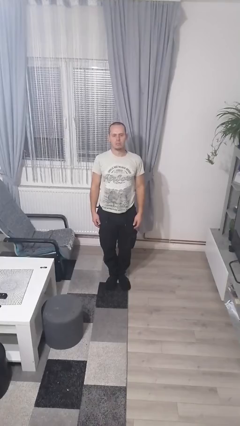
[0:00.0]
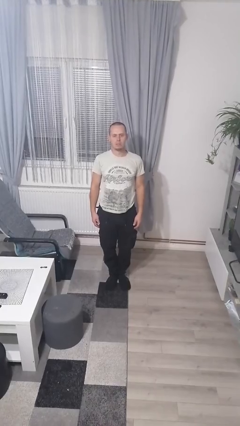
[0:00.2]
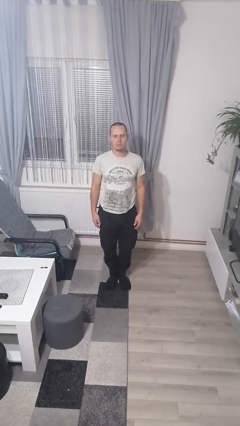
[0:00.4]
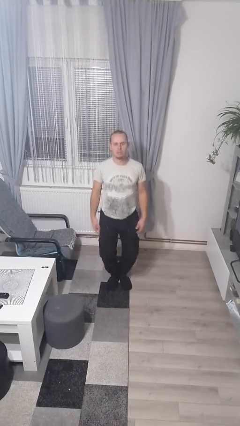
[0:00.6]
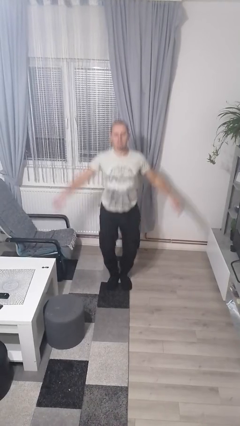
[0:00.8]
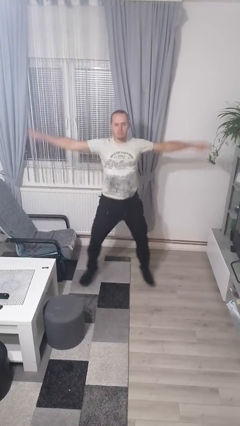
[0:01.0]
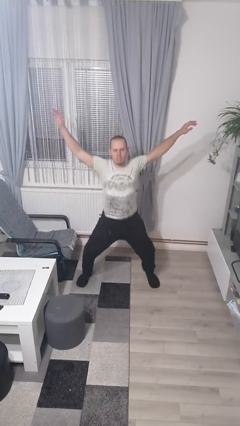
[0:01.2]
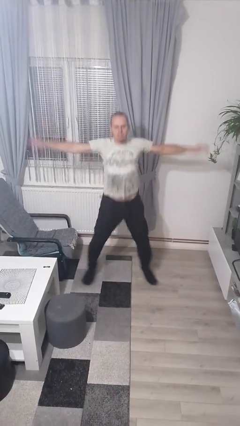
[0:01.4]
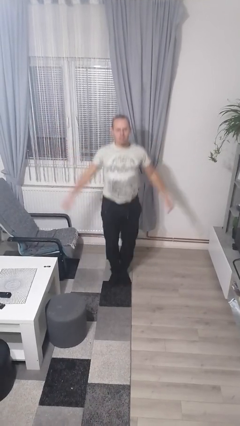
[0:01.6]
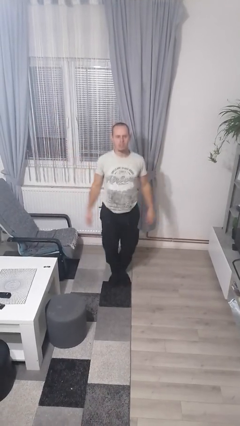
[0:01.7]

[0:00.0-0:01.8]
person exercises with jumping jacks

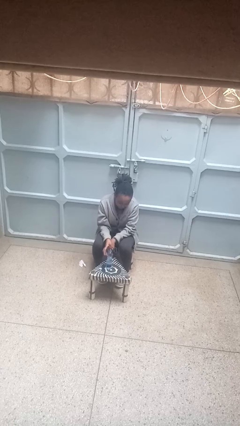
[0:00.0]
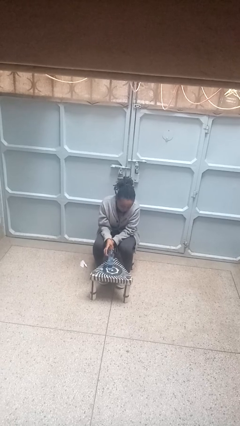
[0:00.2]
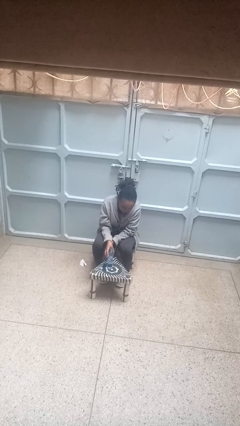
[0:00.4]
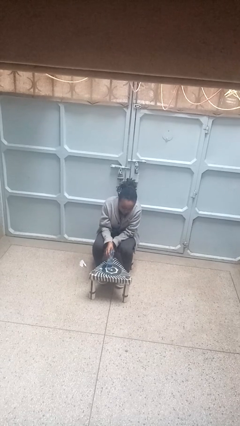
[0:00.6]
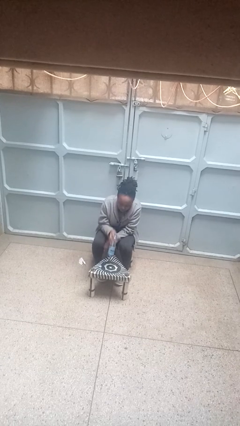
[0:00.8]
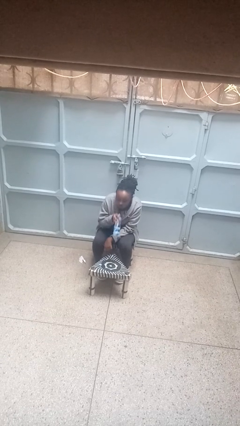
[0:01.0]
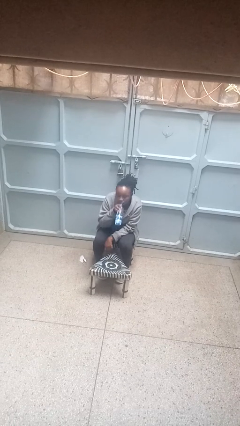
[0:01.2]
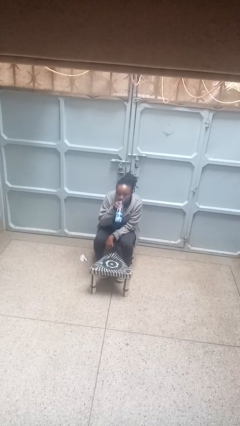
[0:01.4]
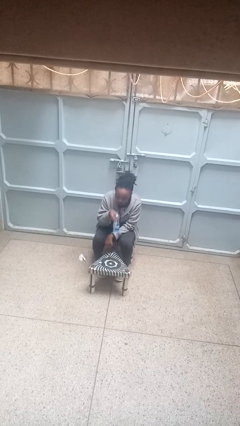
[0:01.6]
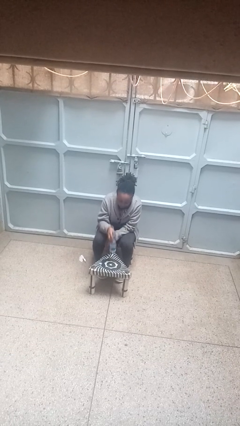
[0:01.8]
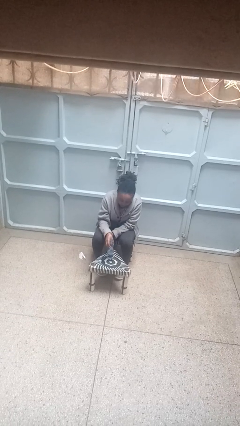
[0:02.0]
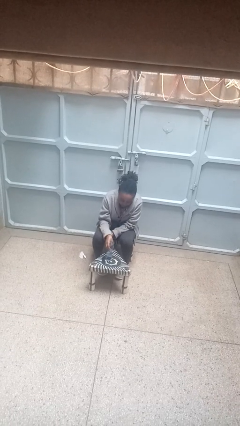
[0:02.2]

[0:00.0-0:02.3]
person drinks from cup

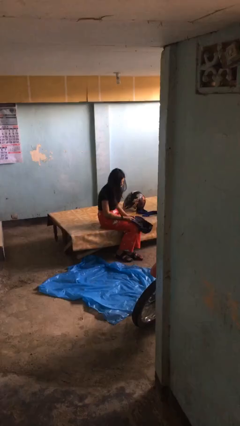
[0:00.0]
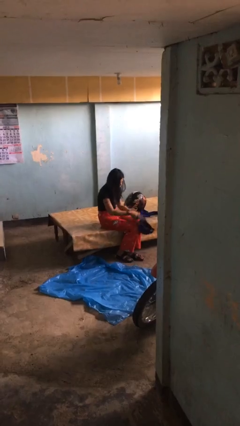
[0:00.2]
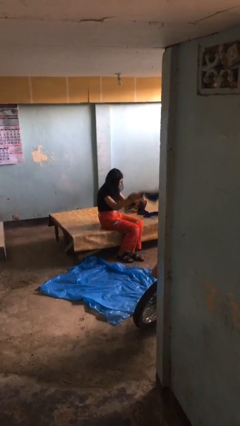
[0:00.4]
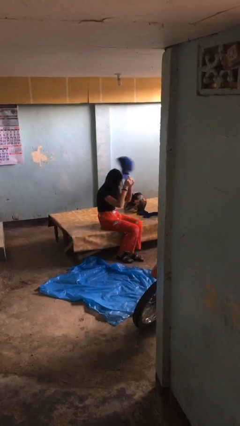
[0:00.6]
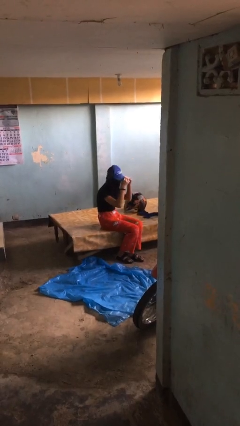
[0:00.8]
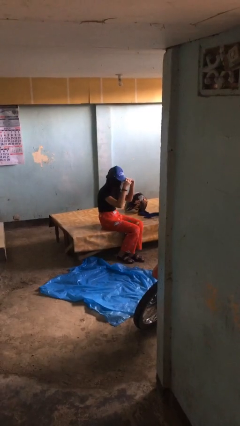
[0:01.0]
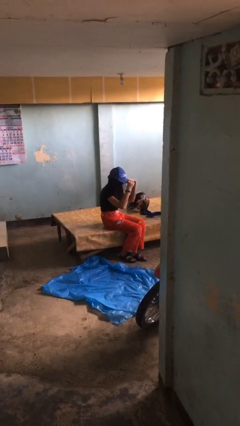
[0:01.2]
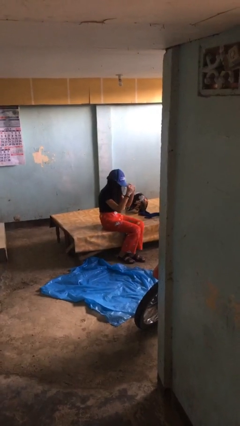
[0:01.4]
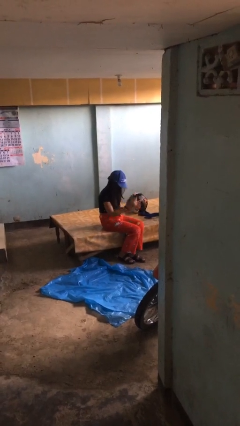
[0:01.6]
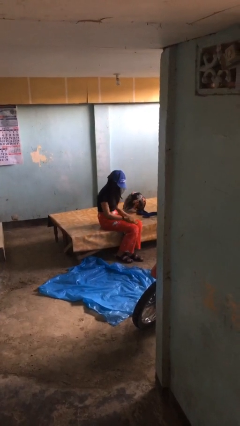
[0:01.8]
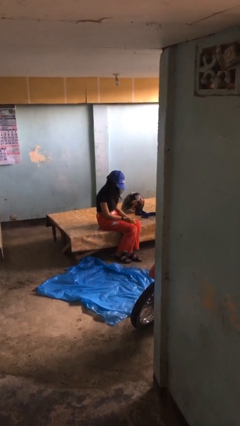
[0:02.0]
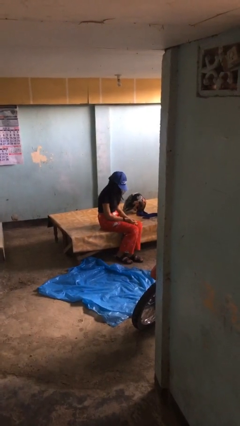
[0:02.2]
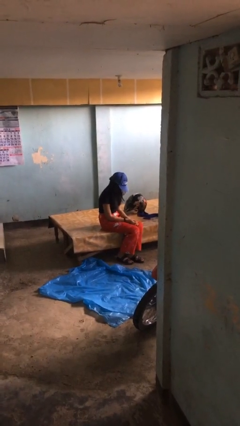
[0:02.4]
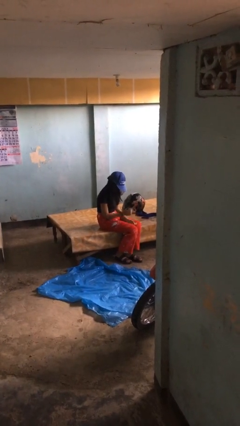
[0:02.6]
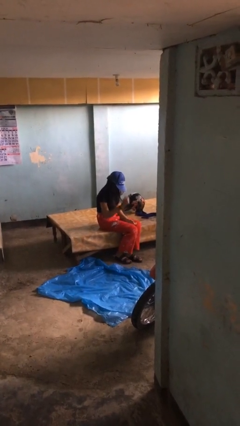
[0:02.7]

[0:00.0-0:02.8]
person puts on hat

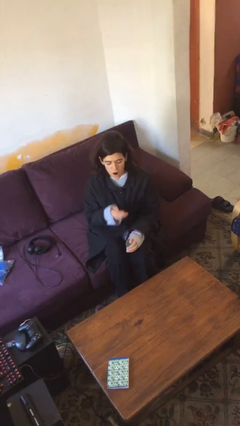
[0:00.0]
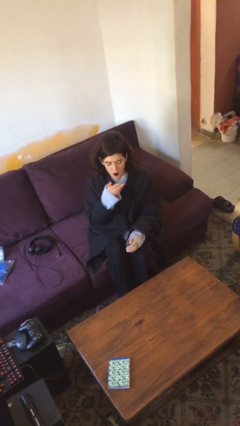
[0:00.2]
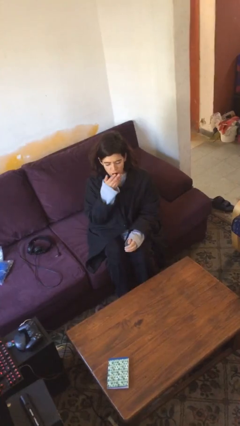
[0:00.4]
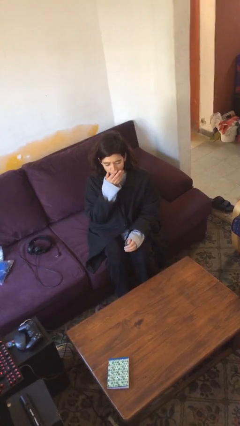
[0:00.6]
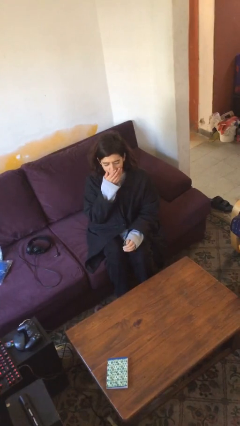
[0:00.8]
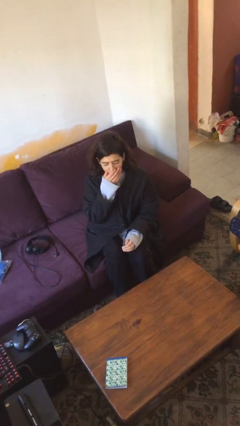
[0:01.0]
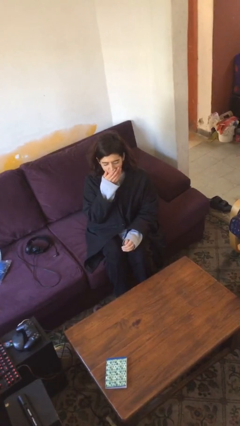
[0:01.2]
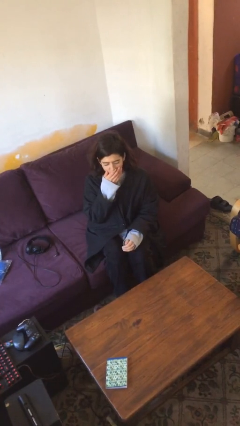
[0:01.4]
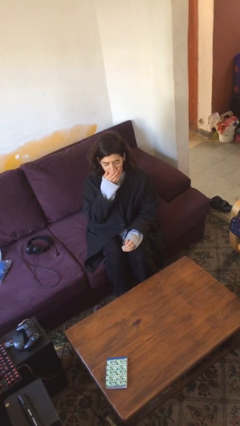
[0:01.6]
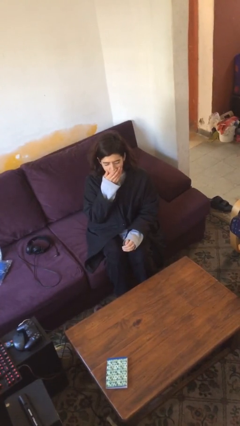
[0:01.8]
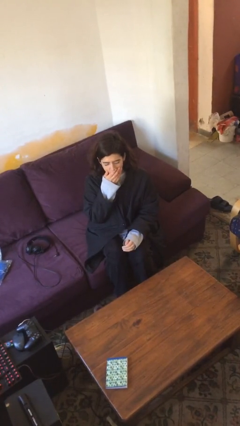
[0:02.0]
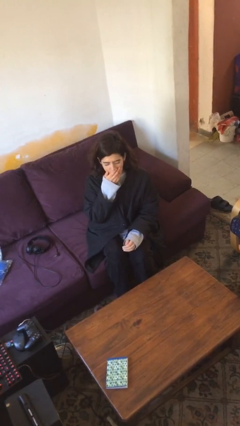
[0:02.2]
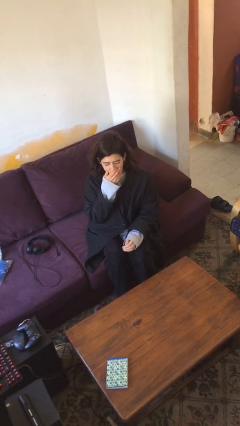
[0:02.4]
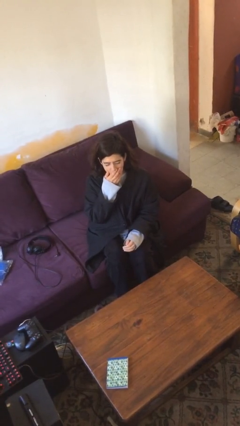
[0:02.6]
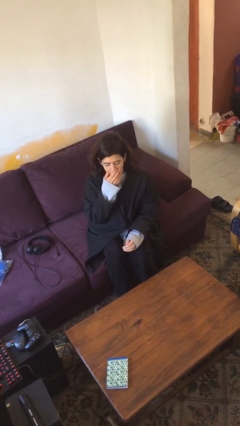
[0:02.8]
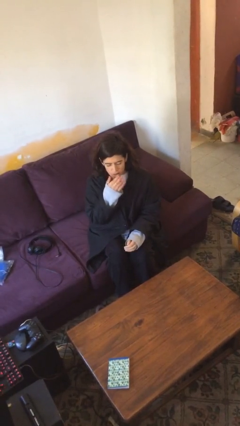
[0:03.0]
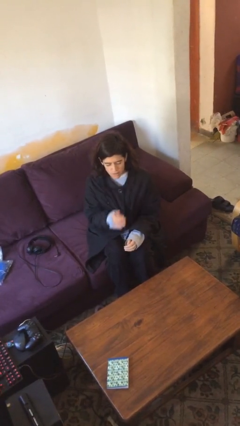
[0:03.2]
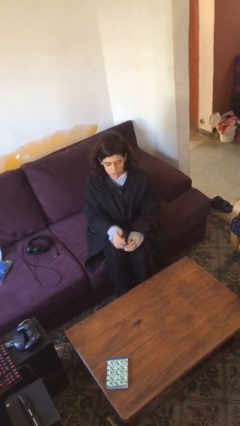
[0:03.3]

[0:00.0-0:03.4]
person yawns

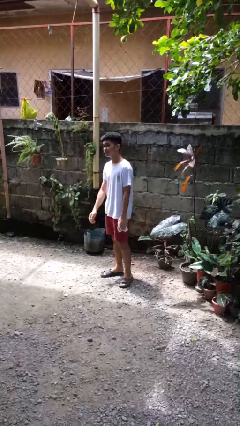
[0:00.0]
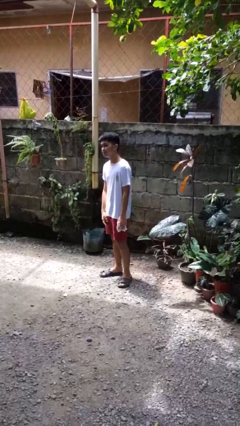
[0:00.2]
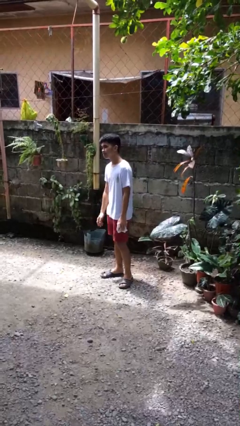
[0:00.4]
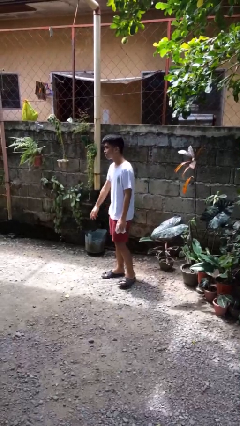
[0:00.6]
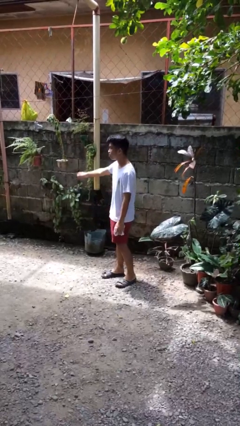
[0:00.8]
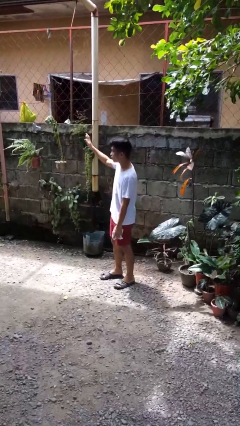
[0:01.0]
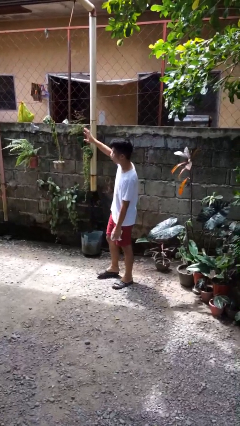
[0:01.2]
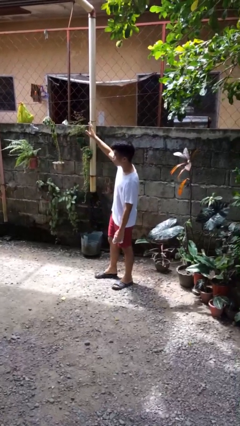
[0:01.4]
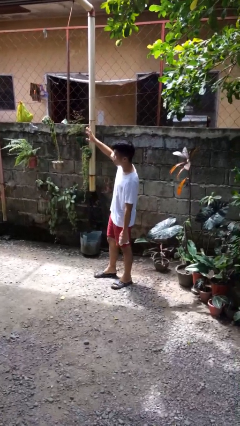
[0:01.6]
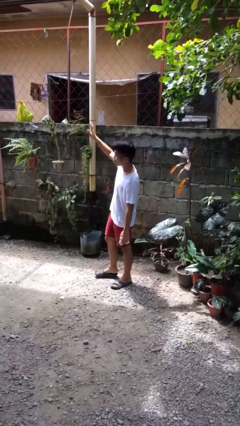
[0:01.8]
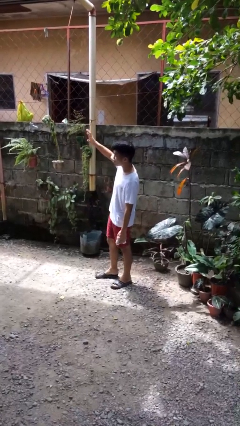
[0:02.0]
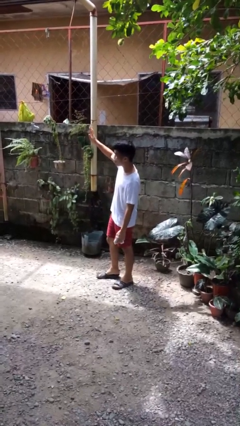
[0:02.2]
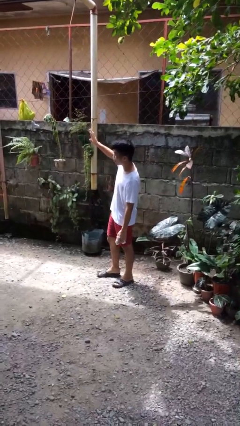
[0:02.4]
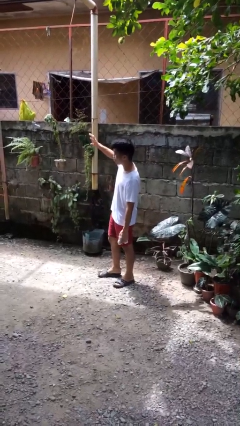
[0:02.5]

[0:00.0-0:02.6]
person waves at person

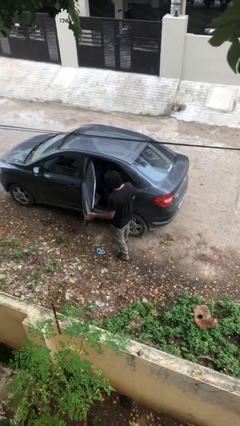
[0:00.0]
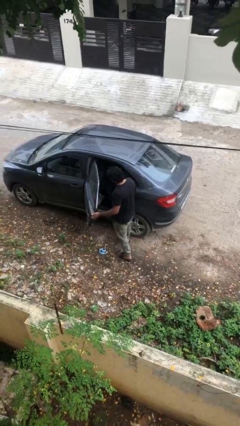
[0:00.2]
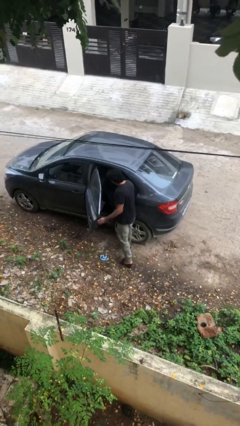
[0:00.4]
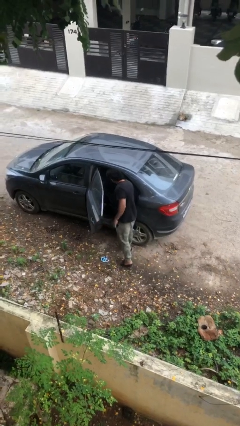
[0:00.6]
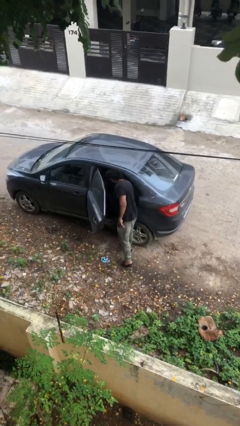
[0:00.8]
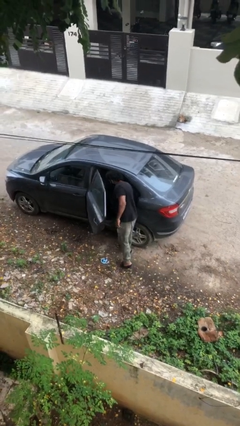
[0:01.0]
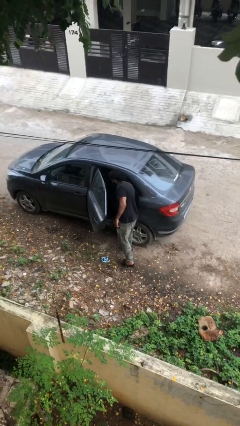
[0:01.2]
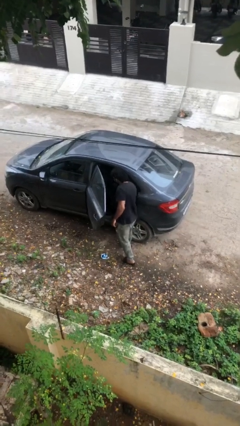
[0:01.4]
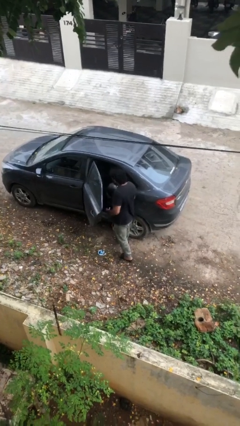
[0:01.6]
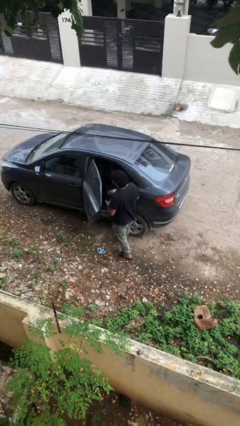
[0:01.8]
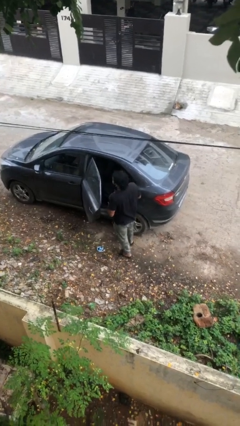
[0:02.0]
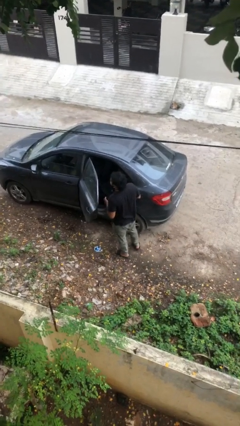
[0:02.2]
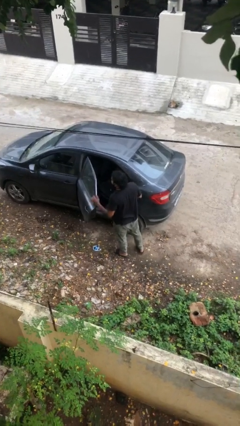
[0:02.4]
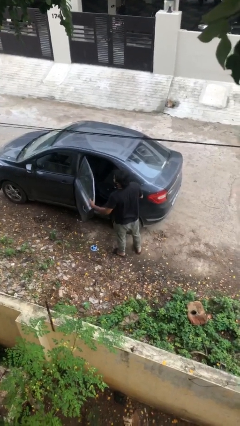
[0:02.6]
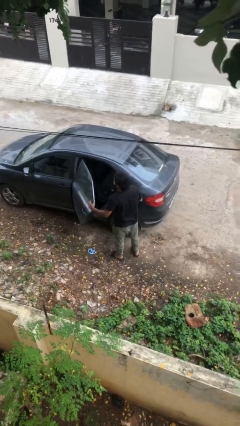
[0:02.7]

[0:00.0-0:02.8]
person unloads car

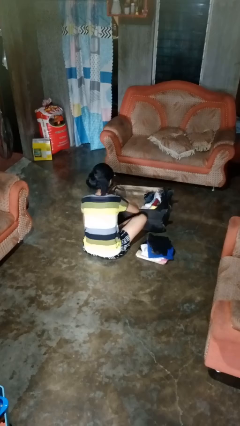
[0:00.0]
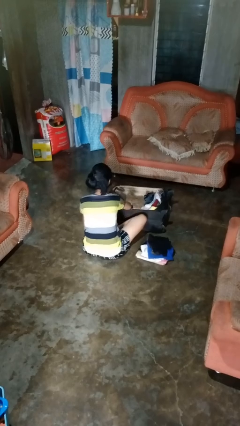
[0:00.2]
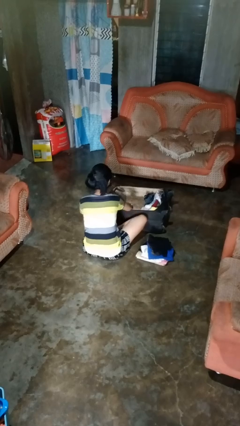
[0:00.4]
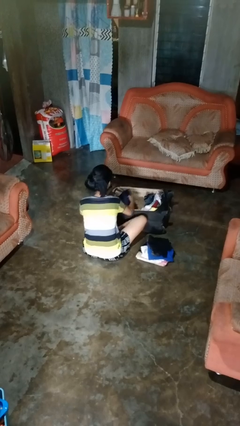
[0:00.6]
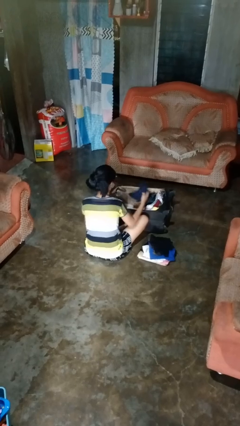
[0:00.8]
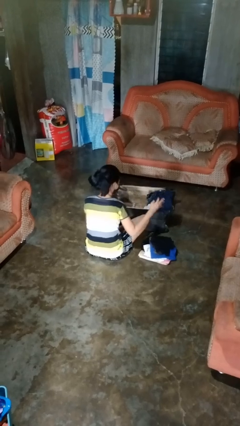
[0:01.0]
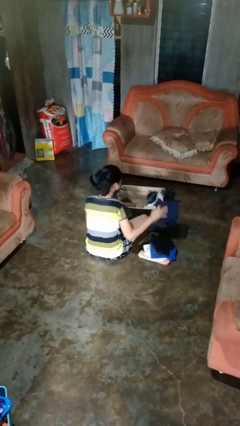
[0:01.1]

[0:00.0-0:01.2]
person unloads clothes from suitcase
